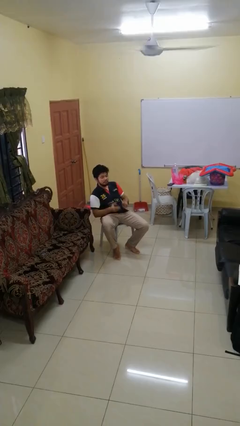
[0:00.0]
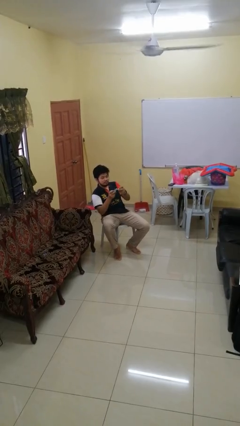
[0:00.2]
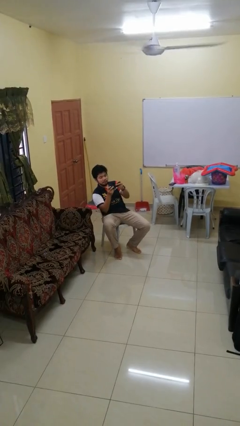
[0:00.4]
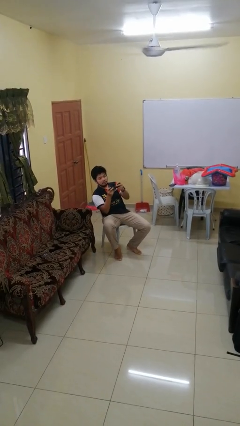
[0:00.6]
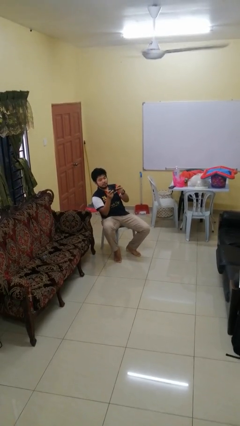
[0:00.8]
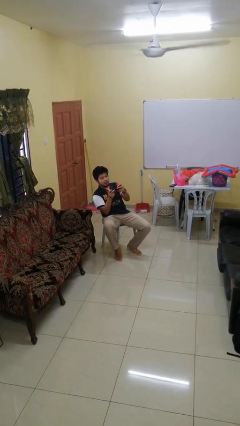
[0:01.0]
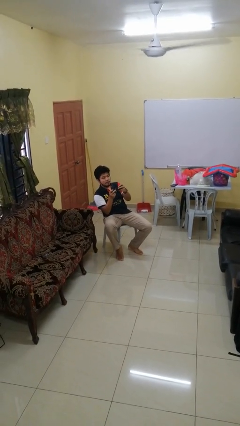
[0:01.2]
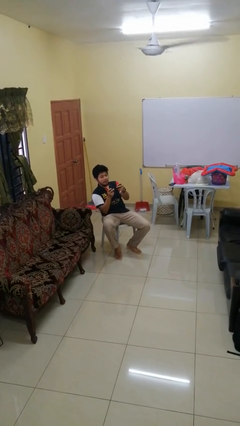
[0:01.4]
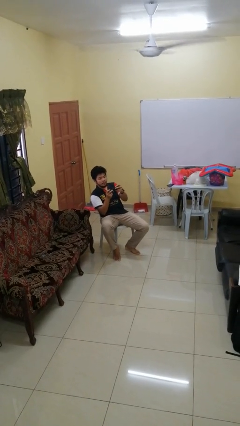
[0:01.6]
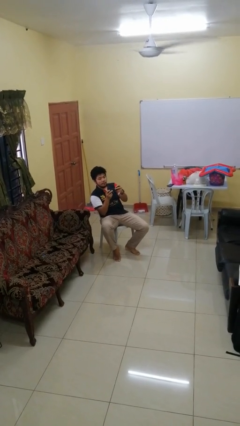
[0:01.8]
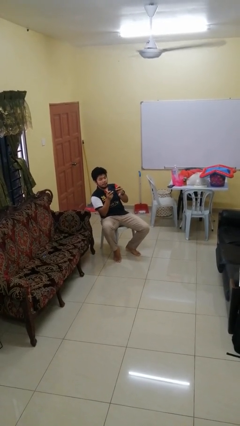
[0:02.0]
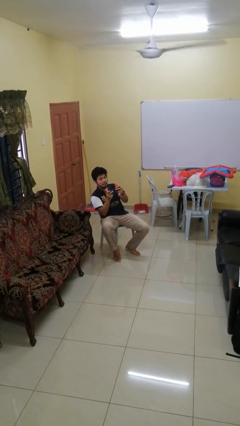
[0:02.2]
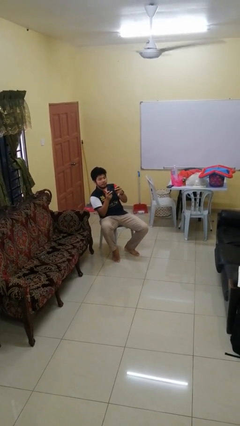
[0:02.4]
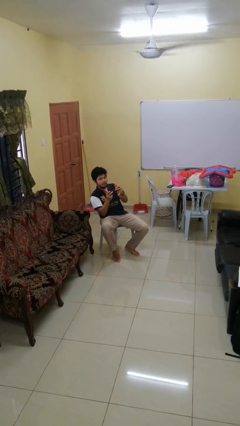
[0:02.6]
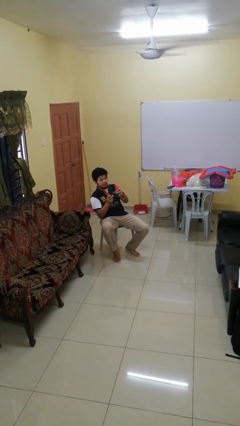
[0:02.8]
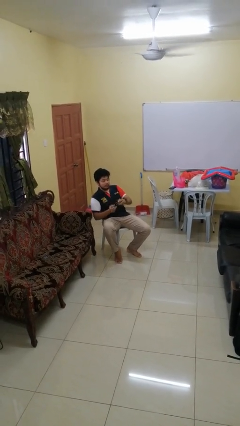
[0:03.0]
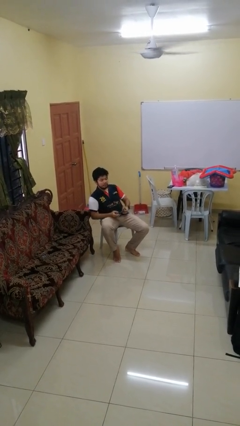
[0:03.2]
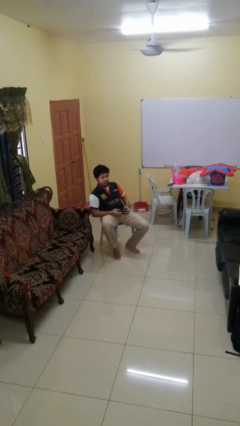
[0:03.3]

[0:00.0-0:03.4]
person interacts with handheld game

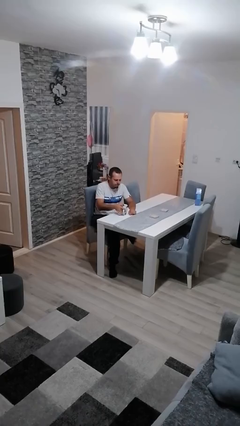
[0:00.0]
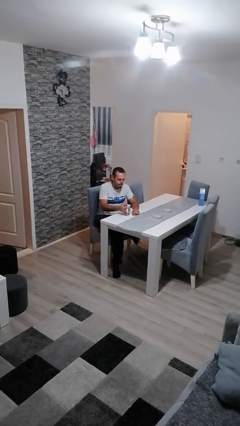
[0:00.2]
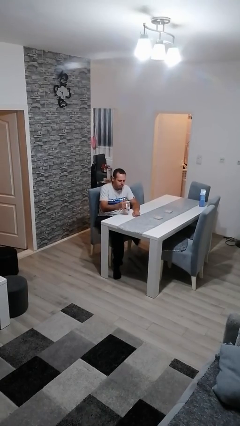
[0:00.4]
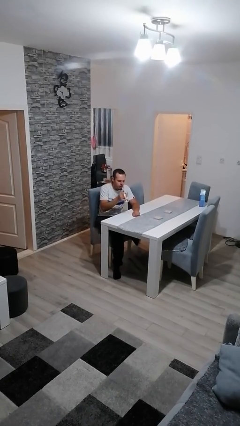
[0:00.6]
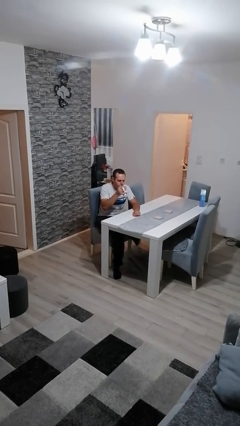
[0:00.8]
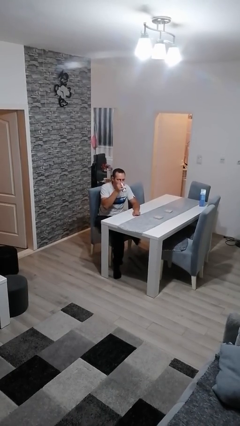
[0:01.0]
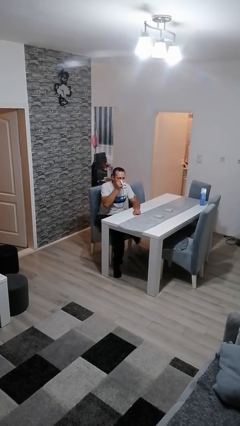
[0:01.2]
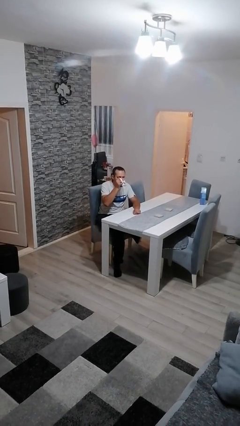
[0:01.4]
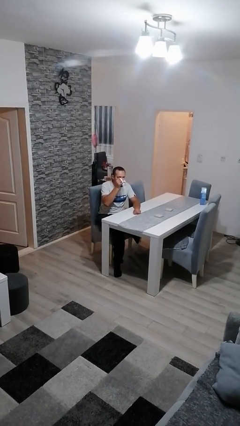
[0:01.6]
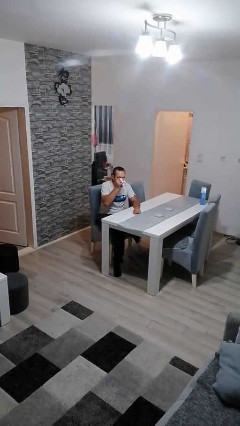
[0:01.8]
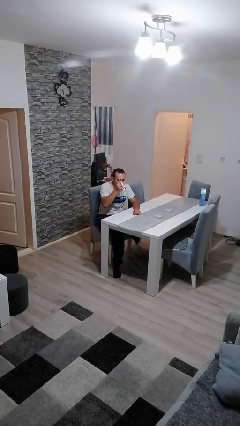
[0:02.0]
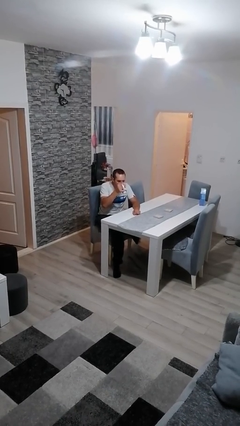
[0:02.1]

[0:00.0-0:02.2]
person drinks from mug

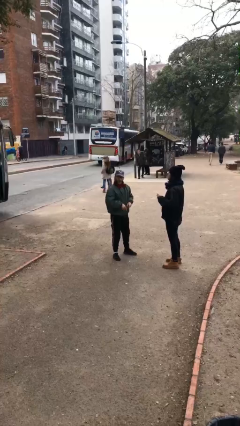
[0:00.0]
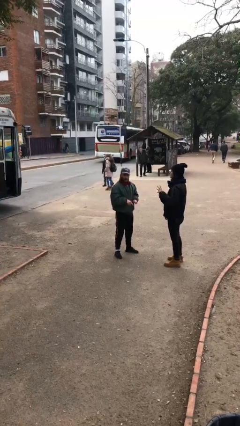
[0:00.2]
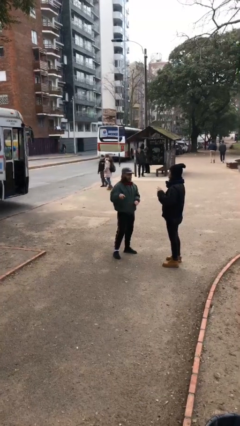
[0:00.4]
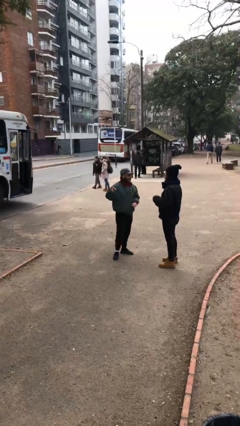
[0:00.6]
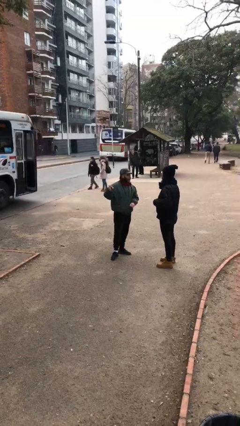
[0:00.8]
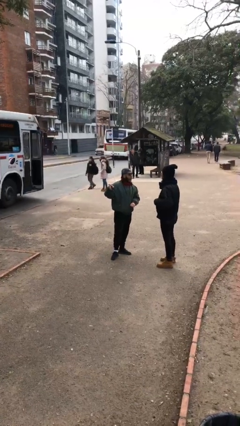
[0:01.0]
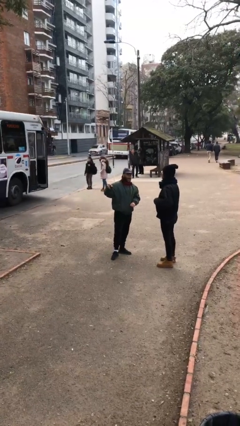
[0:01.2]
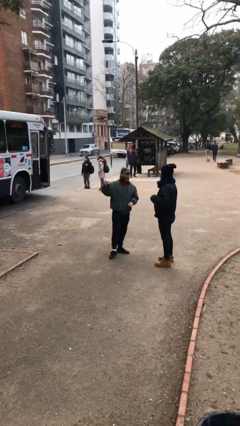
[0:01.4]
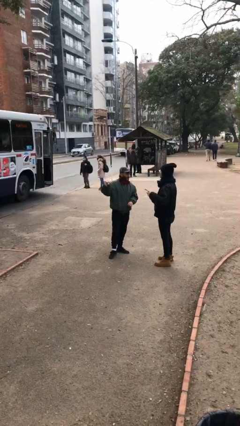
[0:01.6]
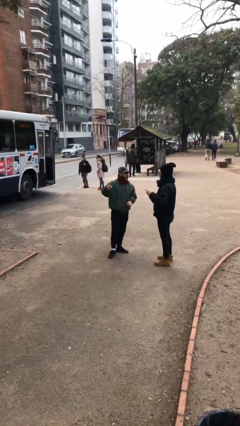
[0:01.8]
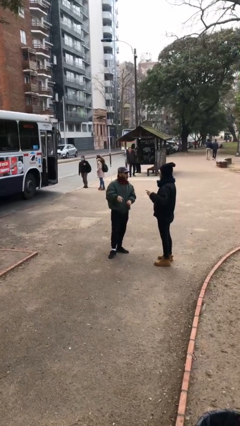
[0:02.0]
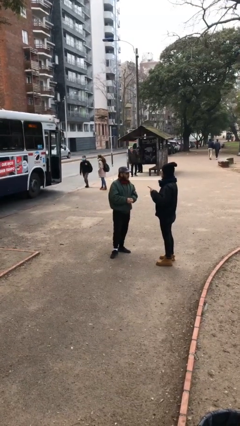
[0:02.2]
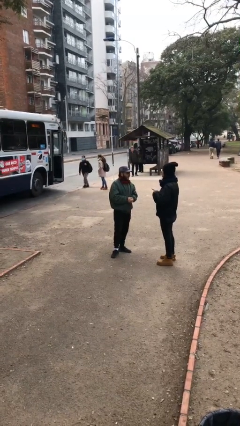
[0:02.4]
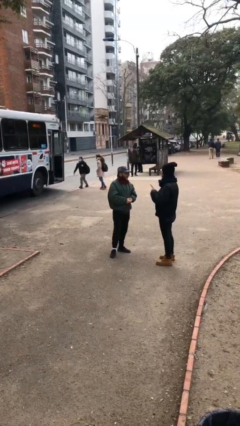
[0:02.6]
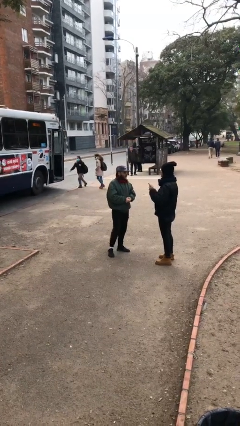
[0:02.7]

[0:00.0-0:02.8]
person talks to person

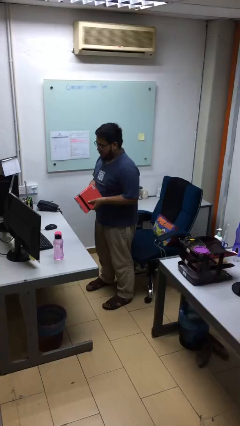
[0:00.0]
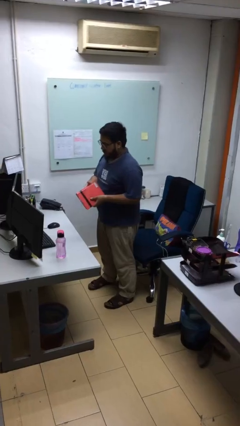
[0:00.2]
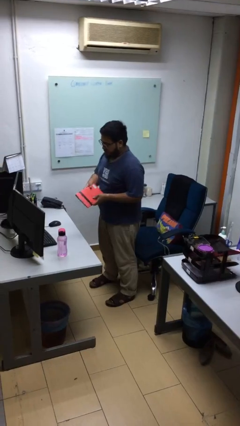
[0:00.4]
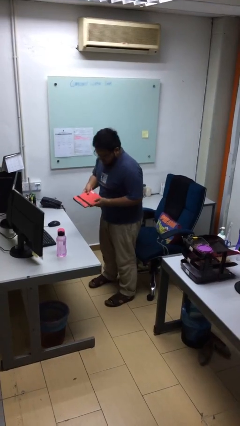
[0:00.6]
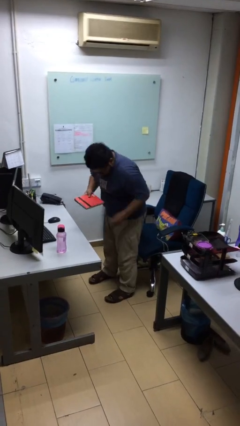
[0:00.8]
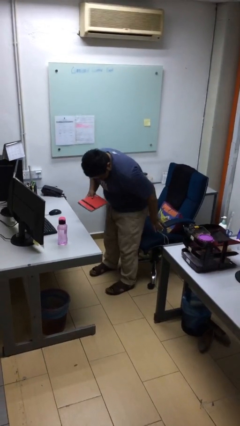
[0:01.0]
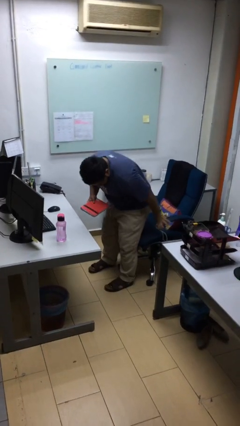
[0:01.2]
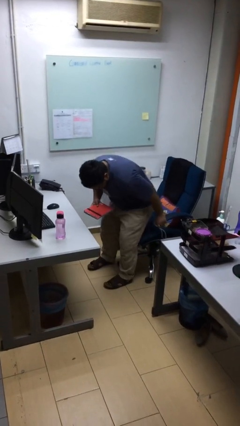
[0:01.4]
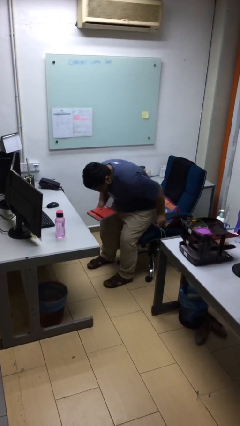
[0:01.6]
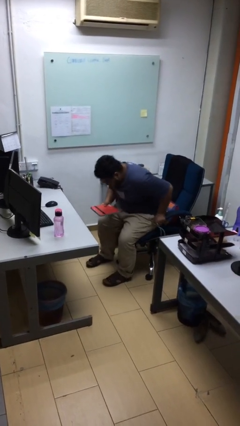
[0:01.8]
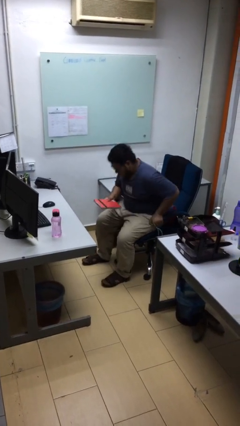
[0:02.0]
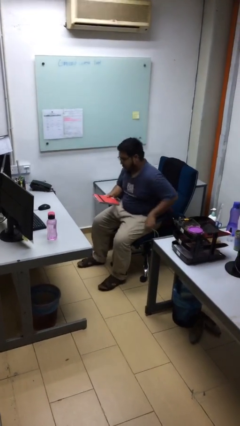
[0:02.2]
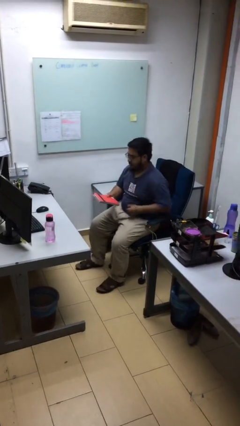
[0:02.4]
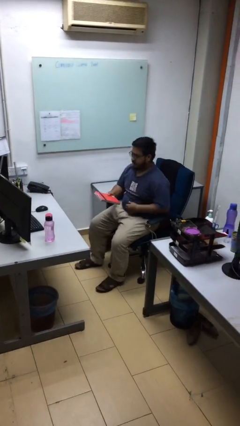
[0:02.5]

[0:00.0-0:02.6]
person sits down

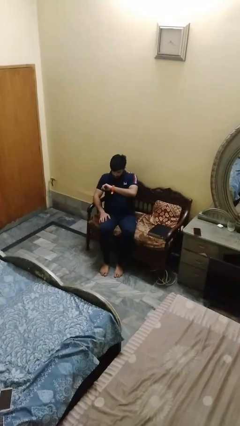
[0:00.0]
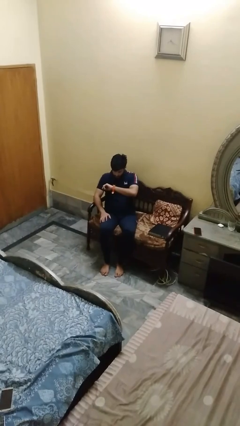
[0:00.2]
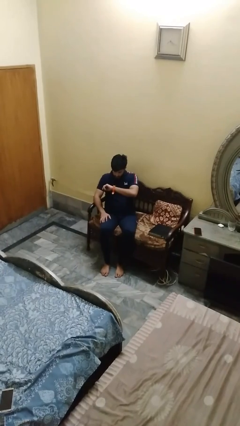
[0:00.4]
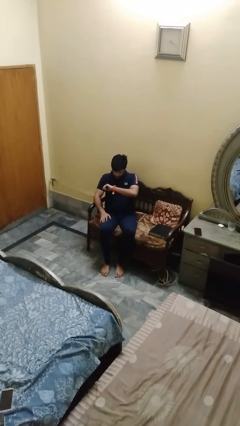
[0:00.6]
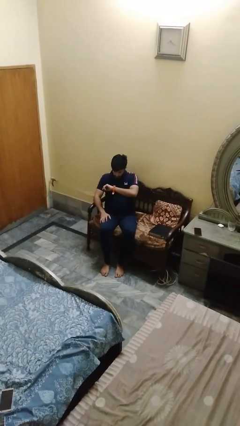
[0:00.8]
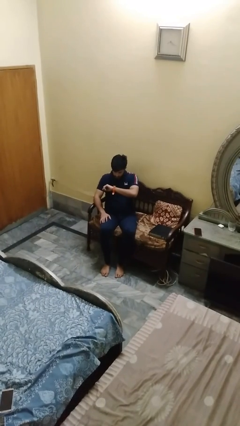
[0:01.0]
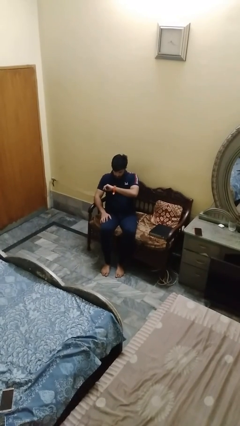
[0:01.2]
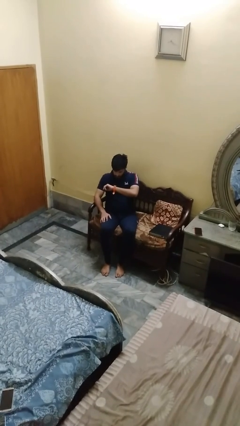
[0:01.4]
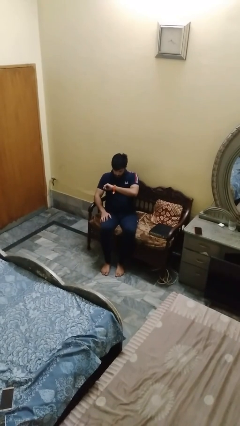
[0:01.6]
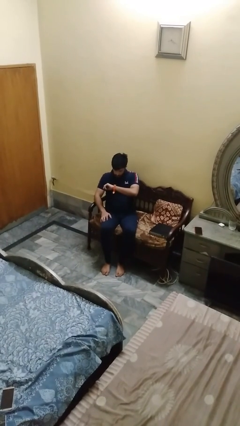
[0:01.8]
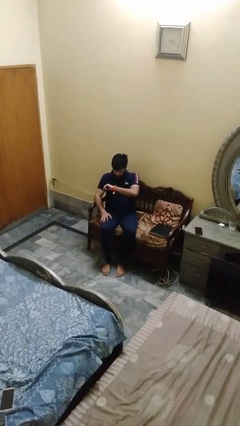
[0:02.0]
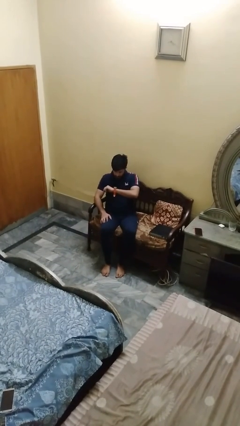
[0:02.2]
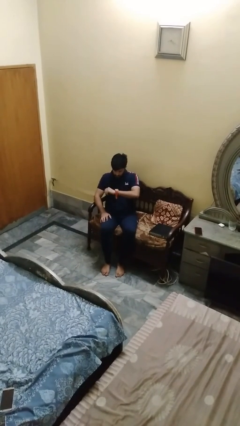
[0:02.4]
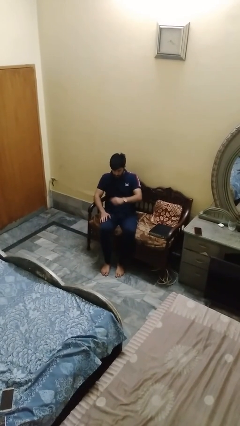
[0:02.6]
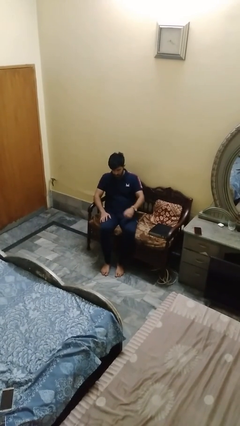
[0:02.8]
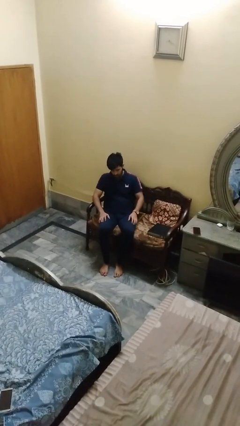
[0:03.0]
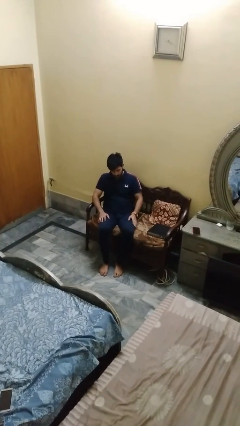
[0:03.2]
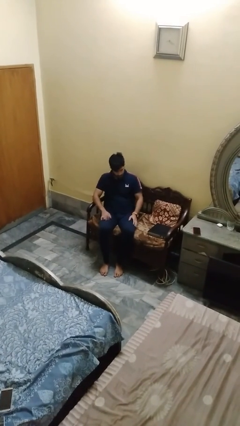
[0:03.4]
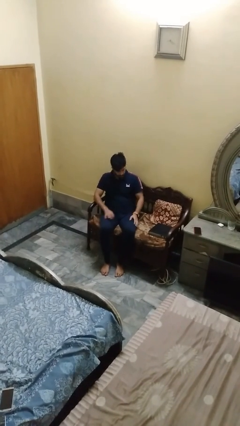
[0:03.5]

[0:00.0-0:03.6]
person looks at wristwatch

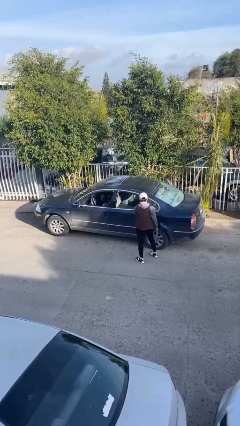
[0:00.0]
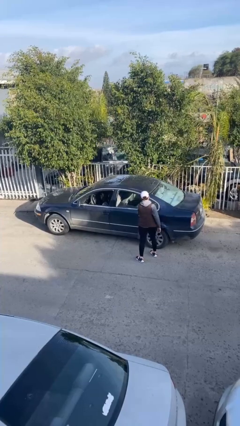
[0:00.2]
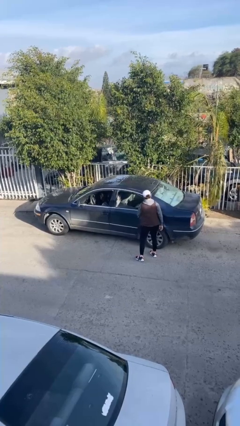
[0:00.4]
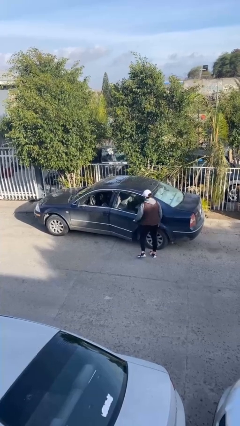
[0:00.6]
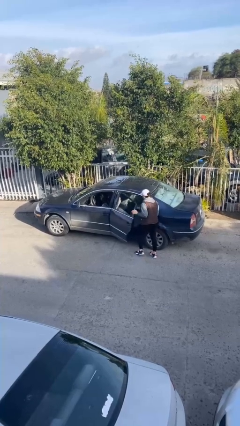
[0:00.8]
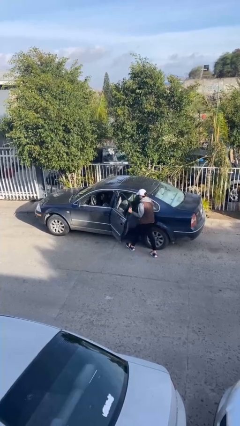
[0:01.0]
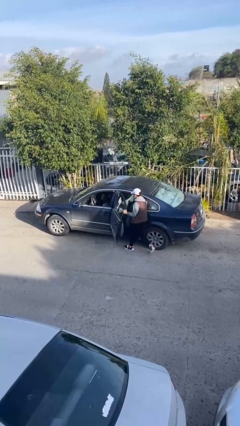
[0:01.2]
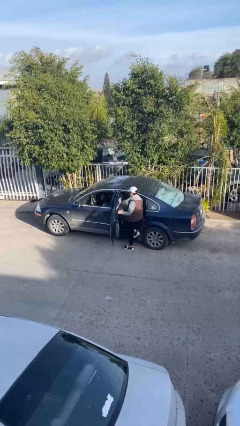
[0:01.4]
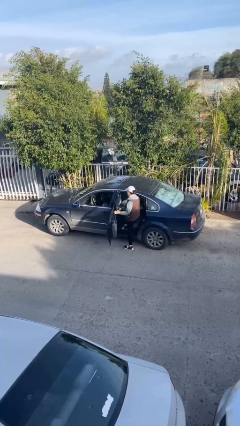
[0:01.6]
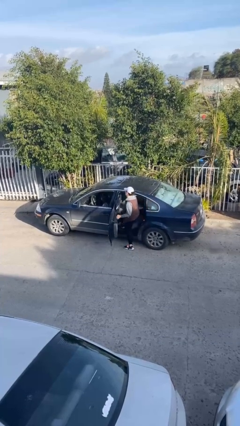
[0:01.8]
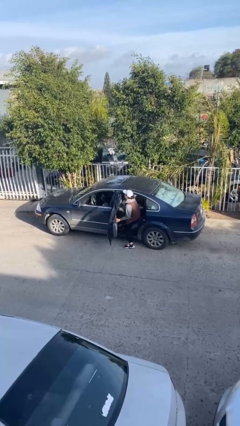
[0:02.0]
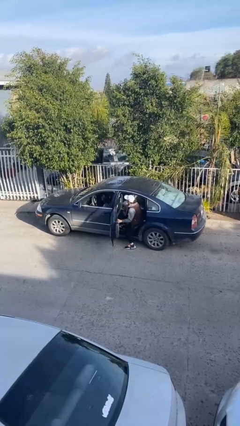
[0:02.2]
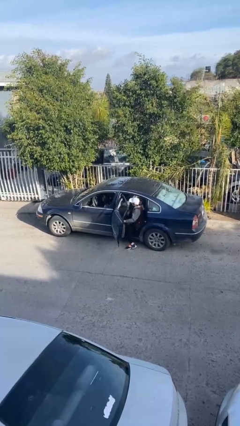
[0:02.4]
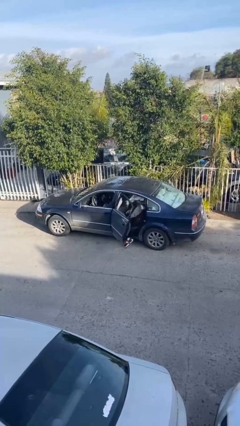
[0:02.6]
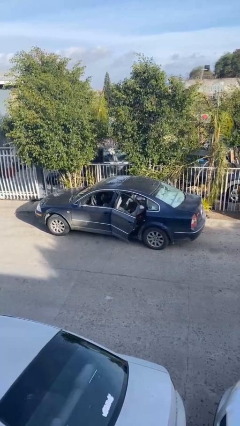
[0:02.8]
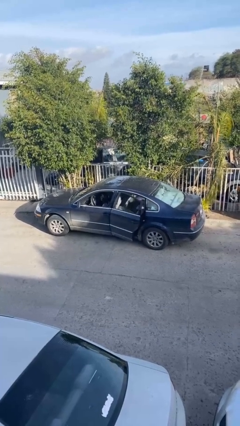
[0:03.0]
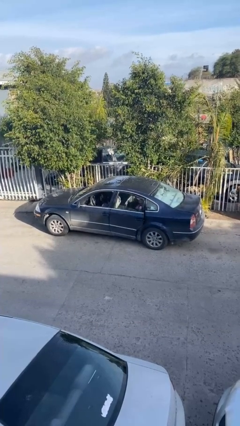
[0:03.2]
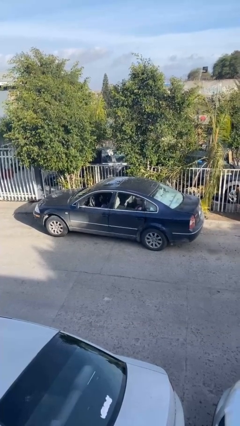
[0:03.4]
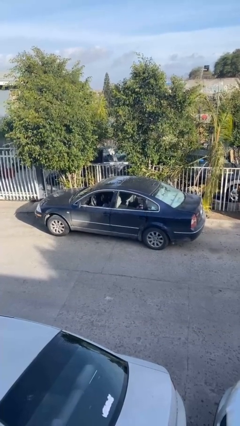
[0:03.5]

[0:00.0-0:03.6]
car picks up person
